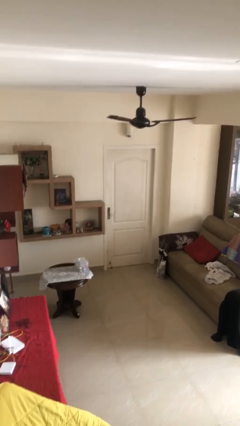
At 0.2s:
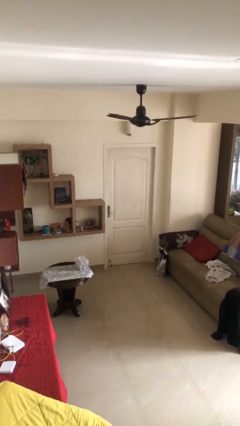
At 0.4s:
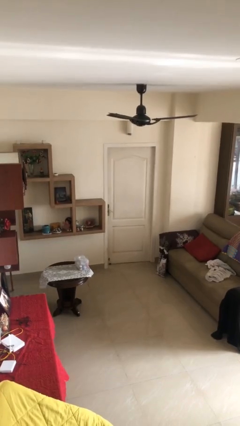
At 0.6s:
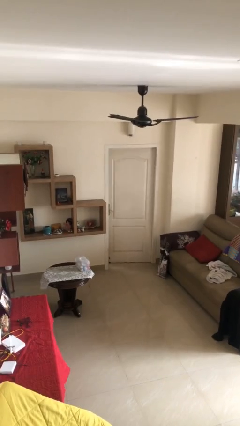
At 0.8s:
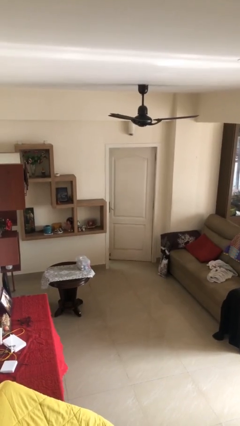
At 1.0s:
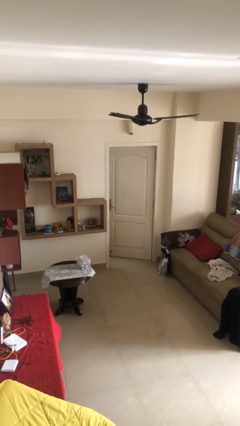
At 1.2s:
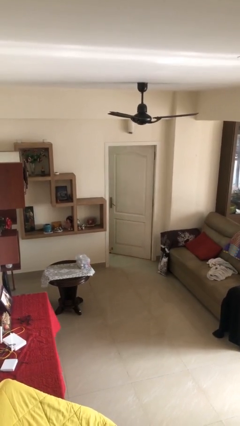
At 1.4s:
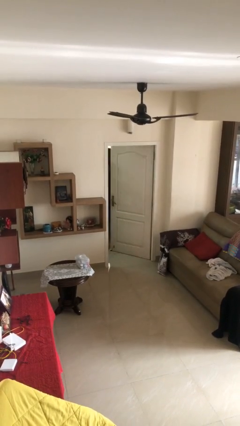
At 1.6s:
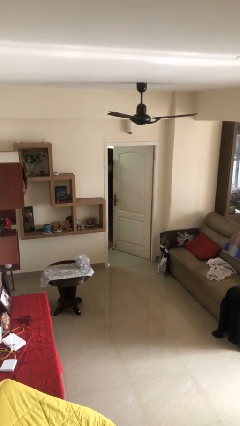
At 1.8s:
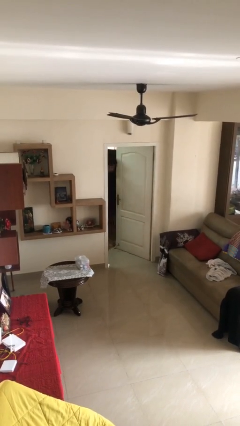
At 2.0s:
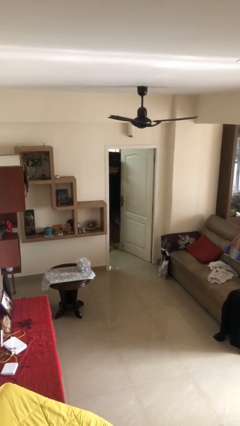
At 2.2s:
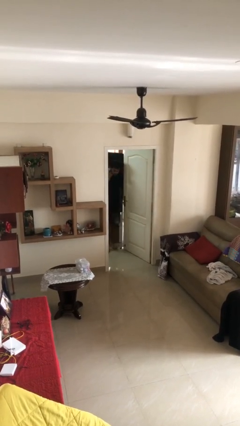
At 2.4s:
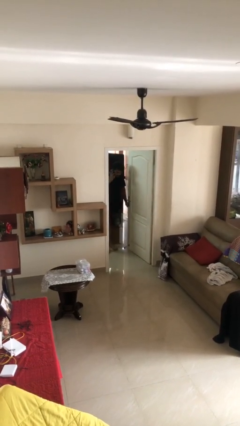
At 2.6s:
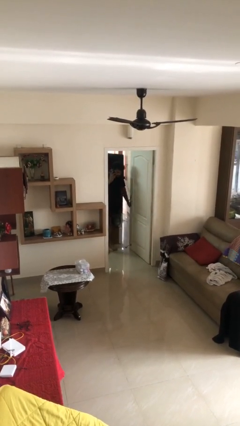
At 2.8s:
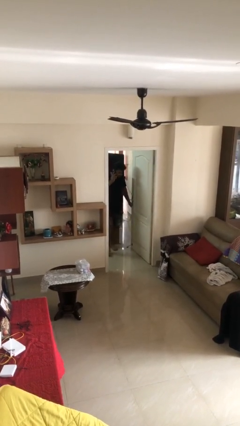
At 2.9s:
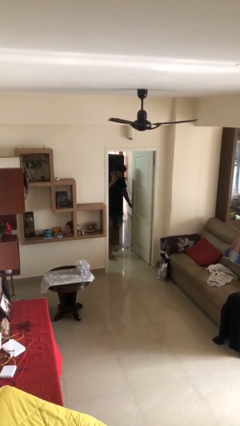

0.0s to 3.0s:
person opens facility door

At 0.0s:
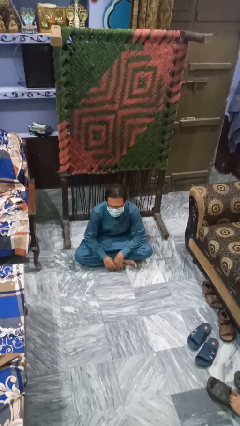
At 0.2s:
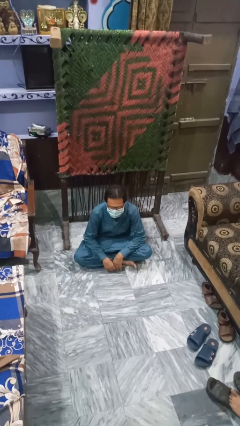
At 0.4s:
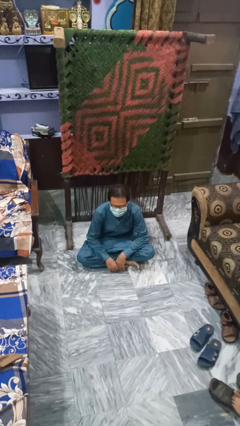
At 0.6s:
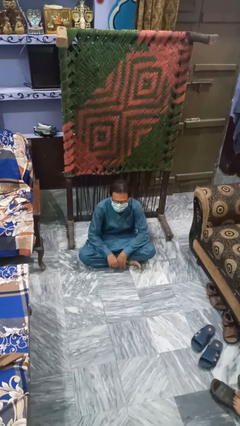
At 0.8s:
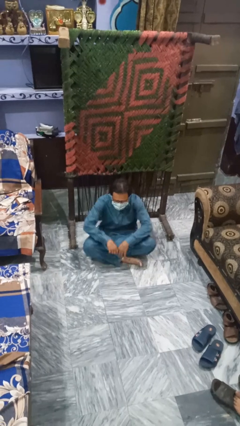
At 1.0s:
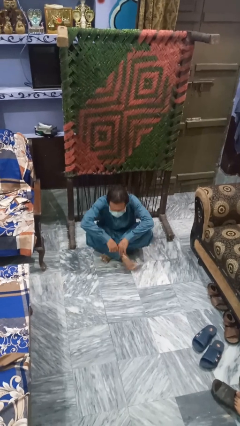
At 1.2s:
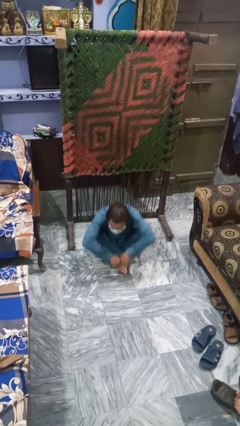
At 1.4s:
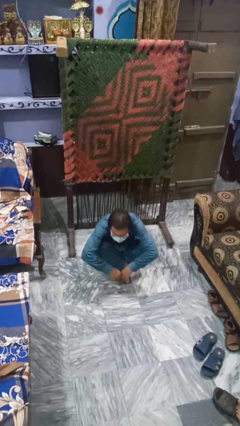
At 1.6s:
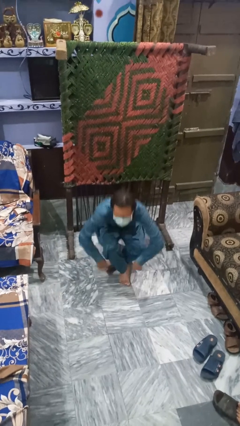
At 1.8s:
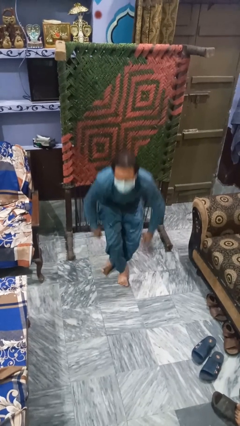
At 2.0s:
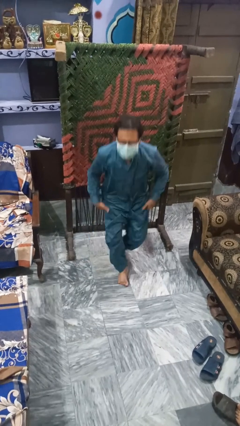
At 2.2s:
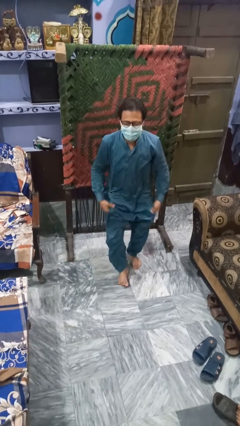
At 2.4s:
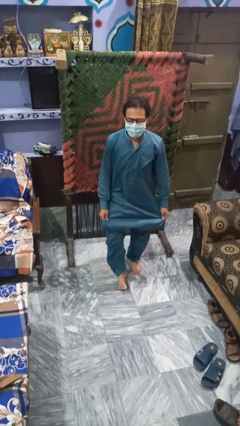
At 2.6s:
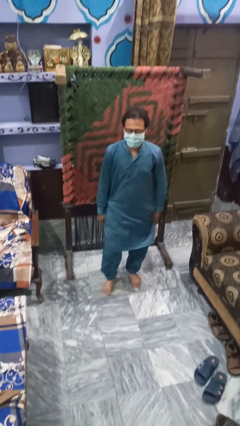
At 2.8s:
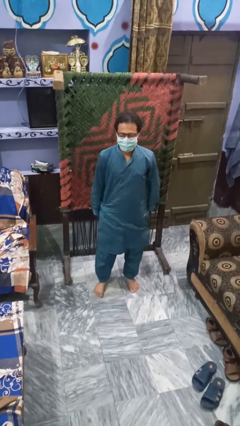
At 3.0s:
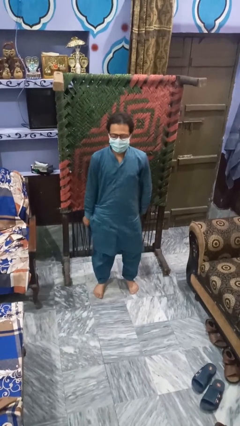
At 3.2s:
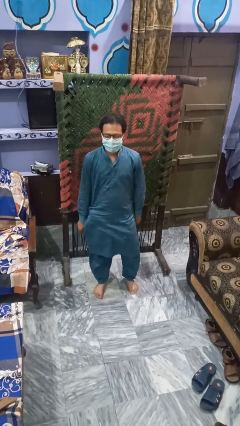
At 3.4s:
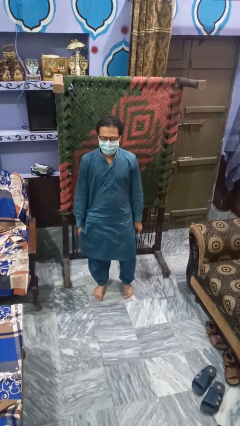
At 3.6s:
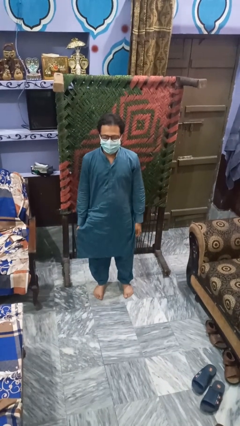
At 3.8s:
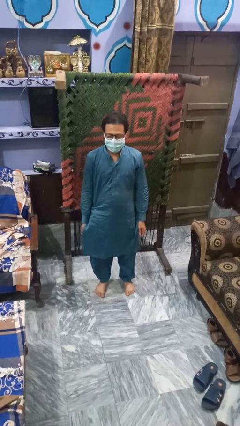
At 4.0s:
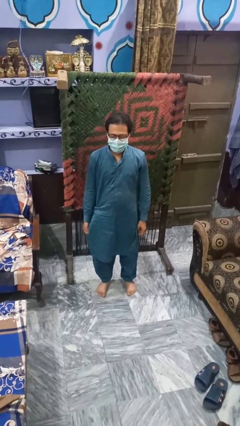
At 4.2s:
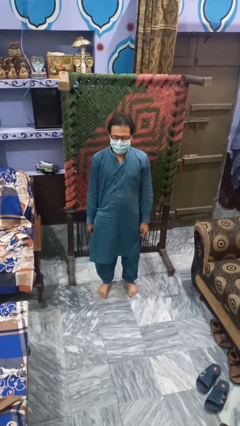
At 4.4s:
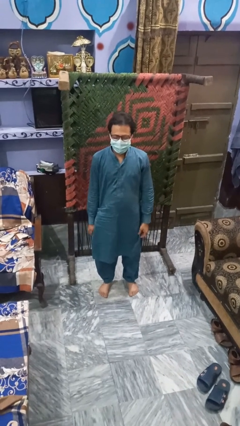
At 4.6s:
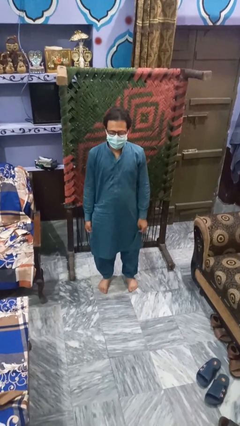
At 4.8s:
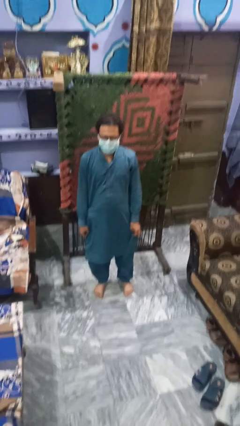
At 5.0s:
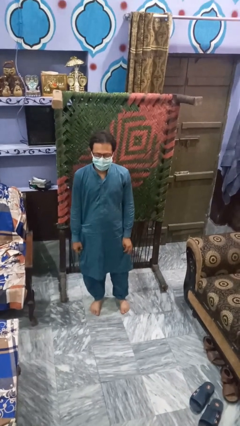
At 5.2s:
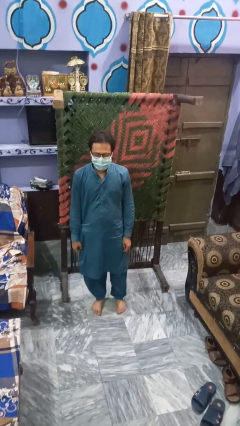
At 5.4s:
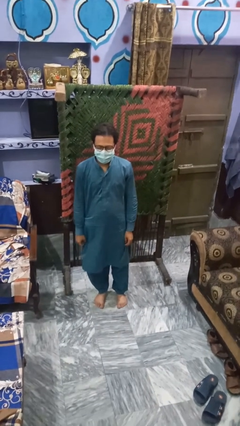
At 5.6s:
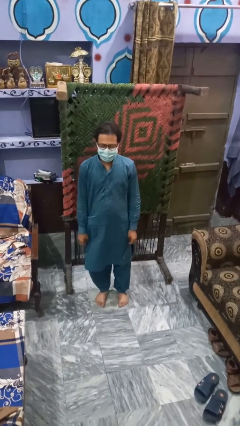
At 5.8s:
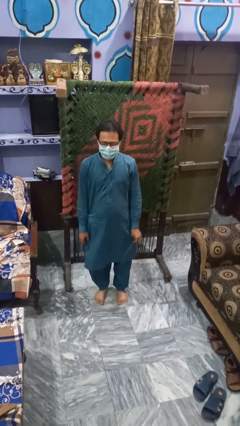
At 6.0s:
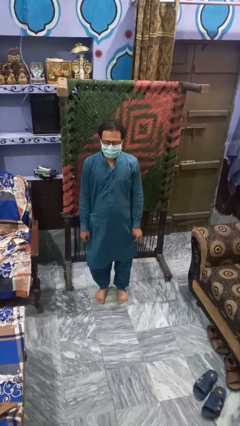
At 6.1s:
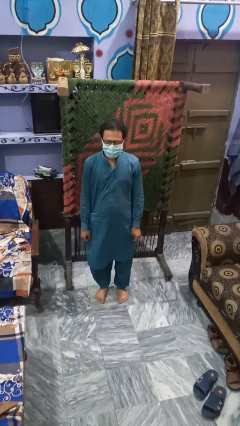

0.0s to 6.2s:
person stands up from floor

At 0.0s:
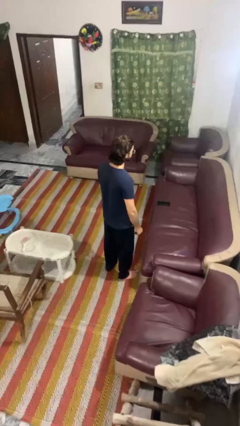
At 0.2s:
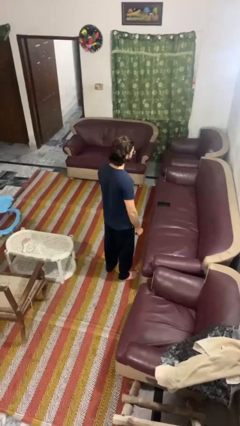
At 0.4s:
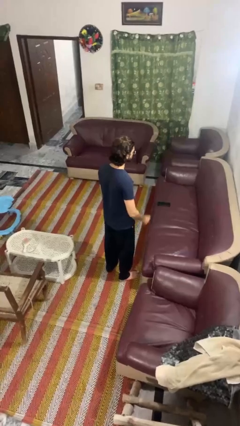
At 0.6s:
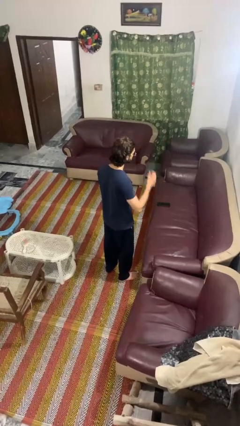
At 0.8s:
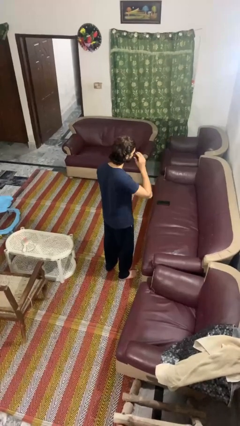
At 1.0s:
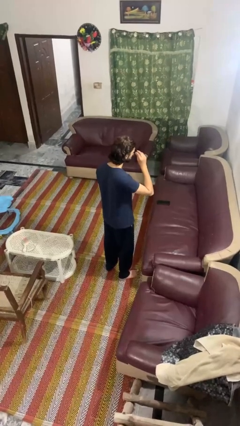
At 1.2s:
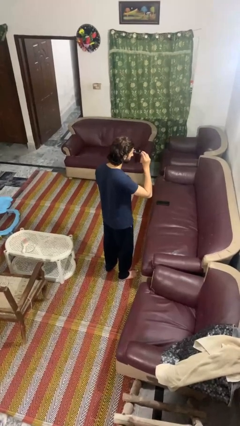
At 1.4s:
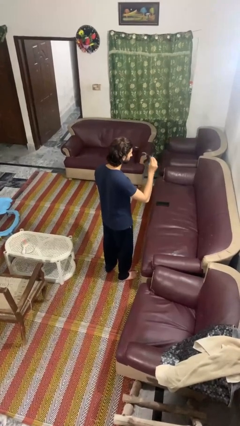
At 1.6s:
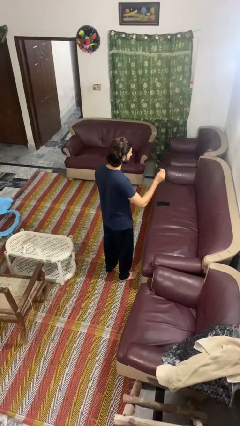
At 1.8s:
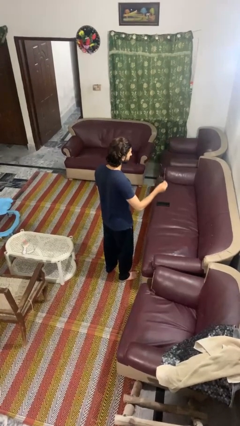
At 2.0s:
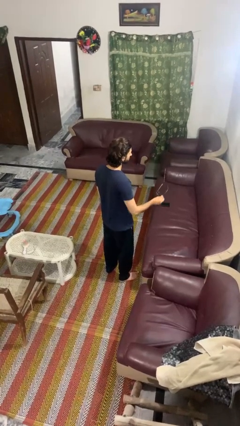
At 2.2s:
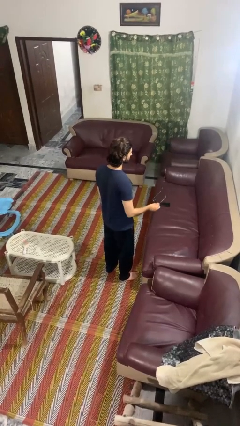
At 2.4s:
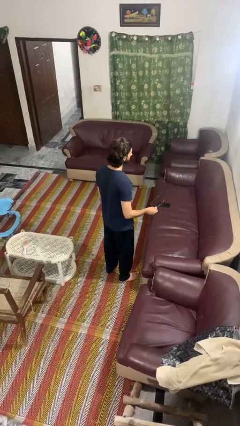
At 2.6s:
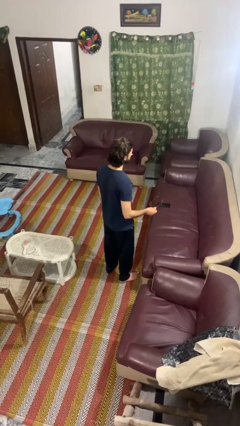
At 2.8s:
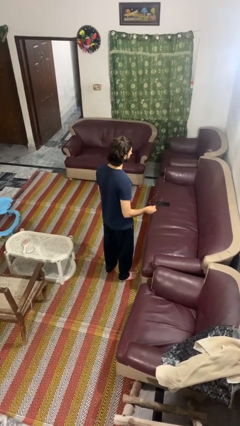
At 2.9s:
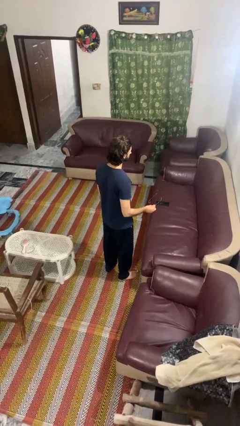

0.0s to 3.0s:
person takes off sunglasses

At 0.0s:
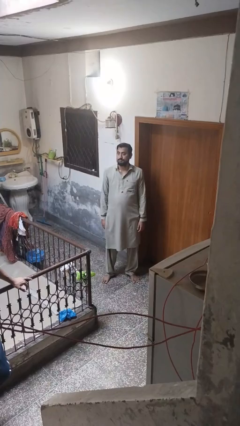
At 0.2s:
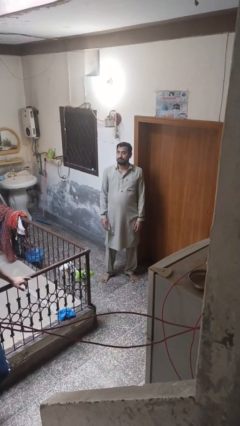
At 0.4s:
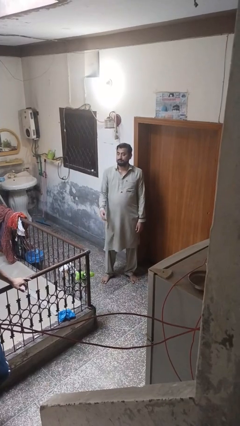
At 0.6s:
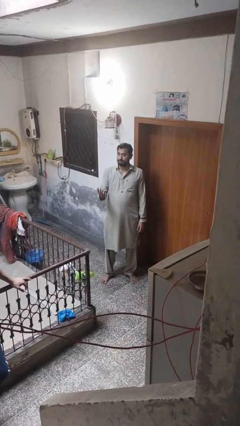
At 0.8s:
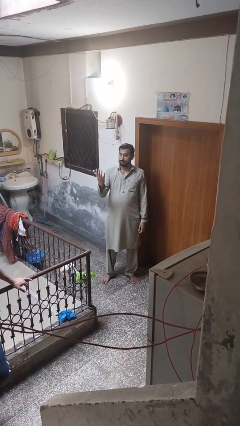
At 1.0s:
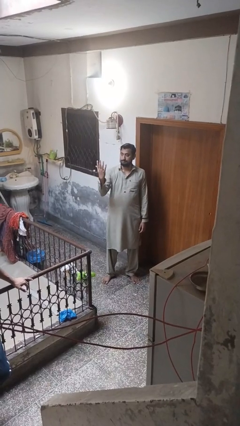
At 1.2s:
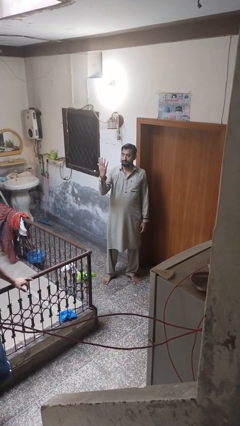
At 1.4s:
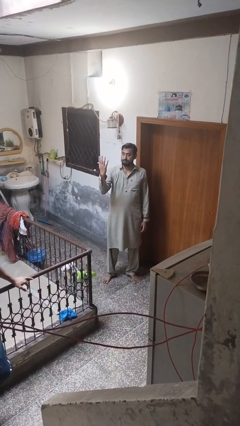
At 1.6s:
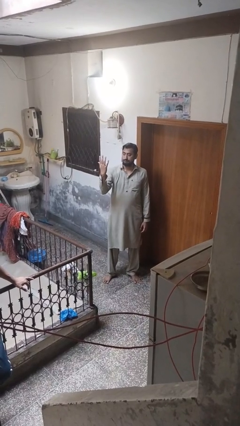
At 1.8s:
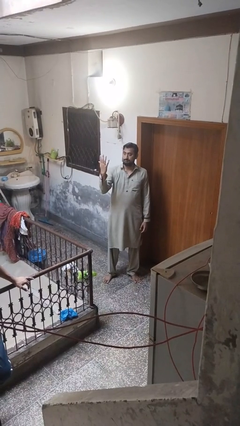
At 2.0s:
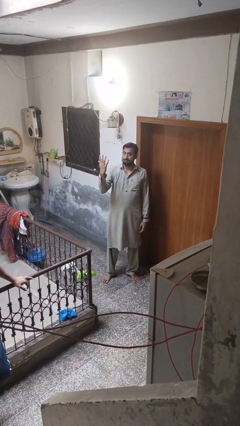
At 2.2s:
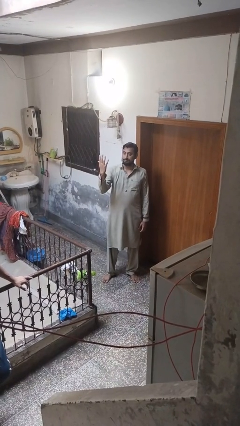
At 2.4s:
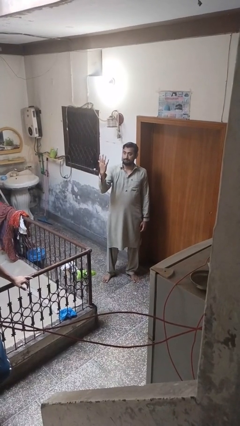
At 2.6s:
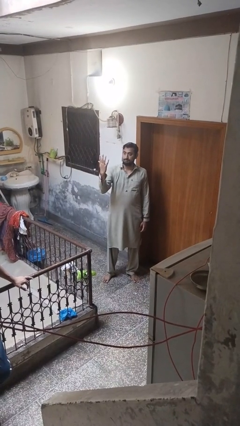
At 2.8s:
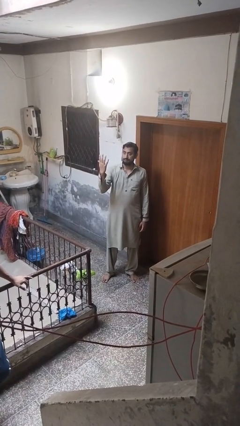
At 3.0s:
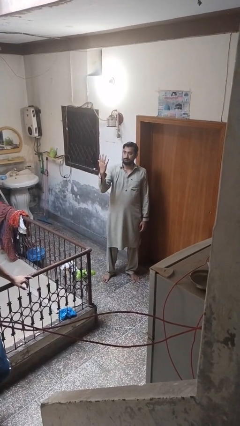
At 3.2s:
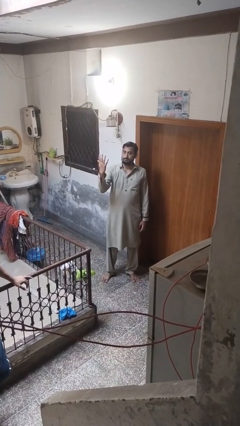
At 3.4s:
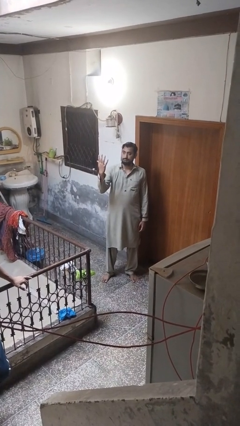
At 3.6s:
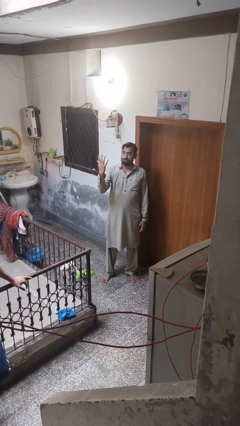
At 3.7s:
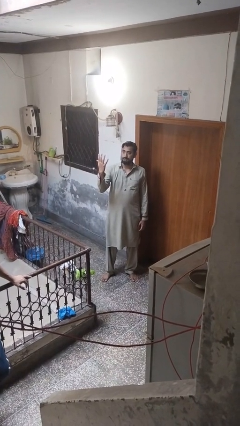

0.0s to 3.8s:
person gestures number five

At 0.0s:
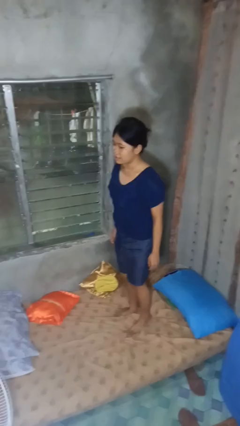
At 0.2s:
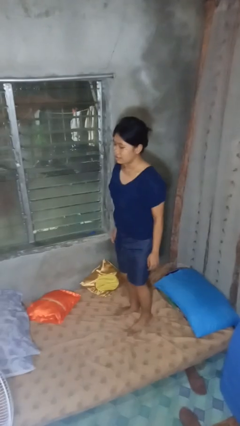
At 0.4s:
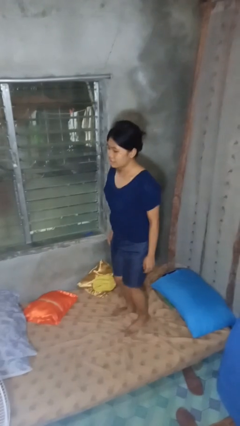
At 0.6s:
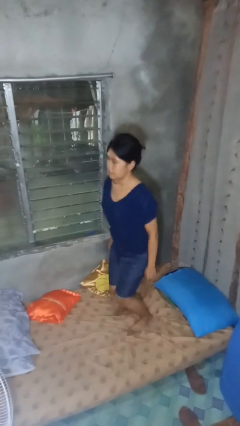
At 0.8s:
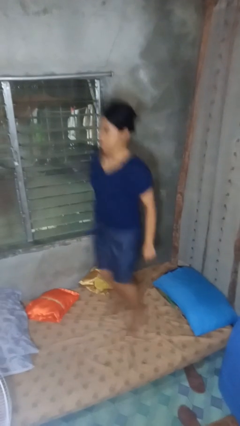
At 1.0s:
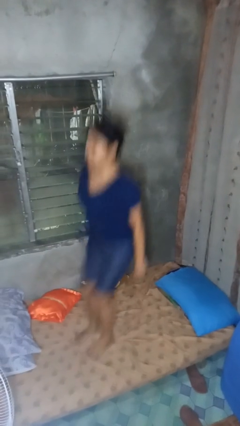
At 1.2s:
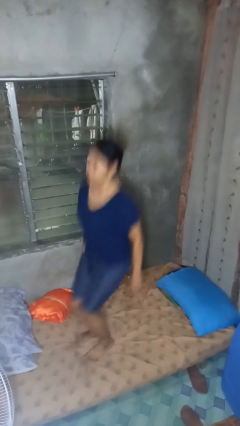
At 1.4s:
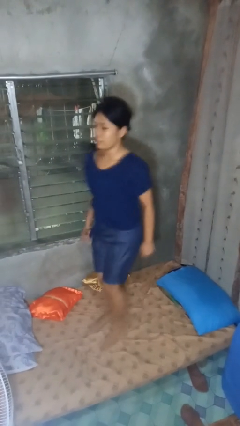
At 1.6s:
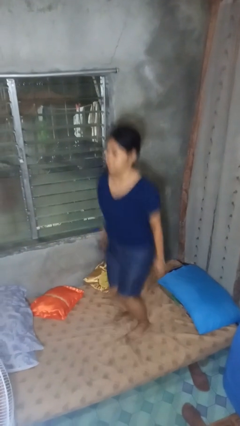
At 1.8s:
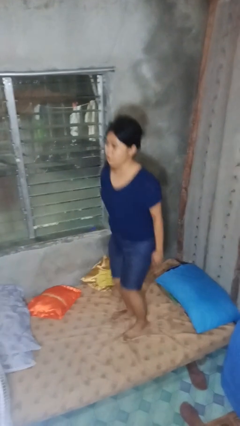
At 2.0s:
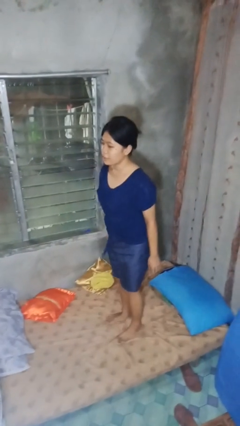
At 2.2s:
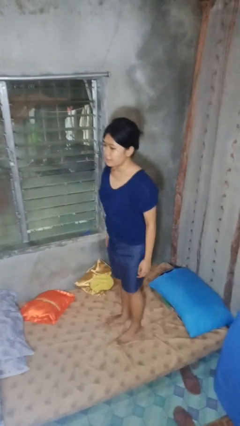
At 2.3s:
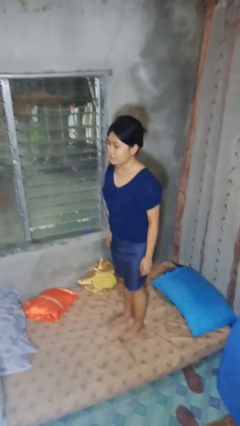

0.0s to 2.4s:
person jumps on bed
